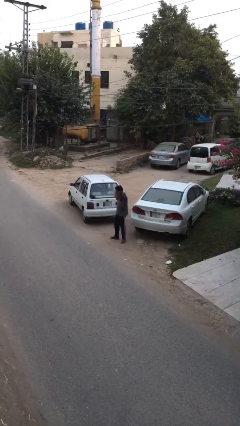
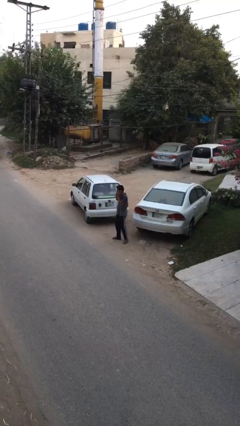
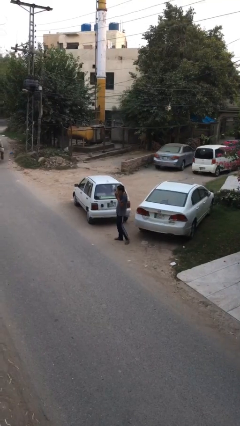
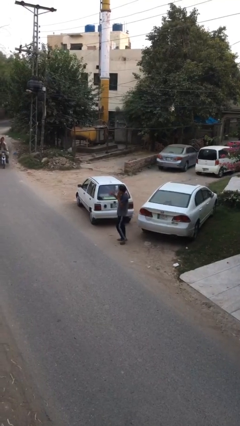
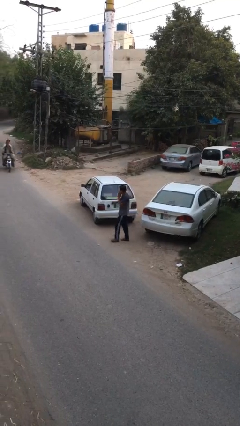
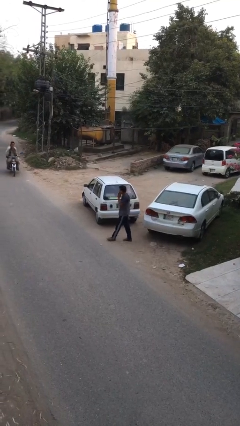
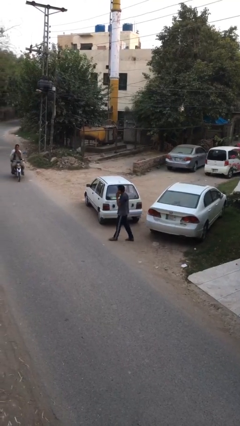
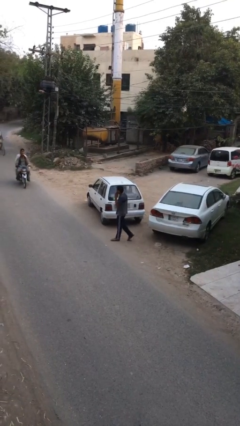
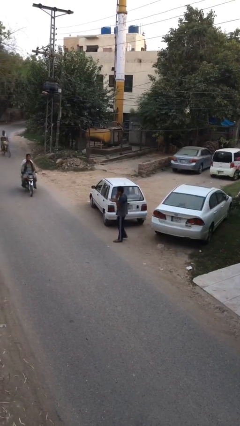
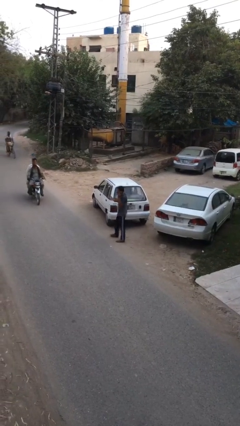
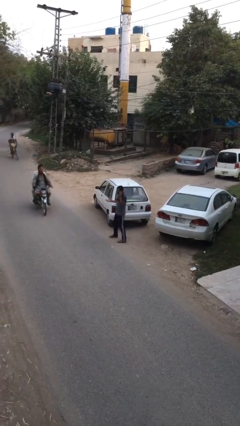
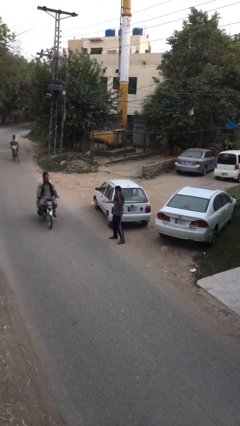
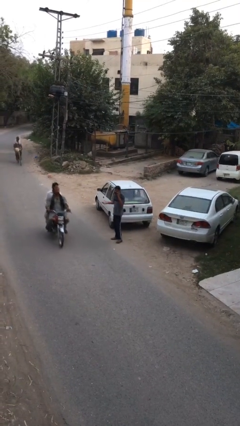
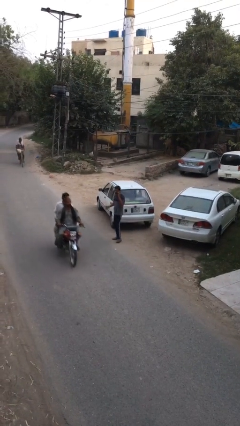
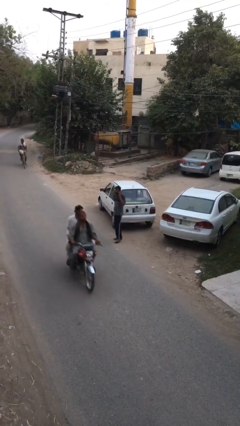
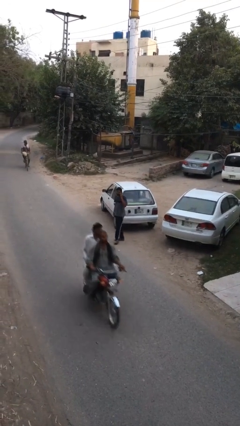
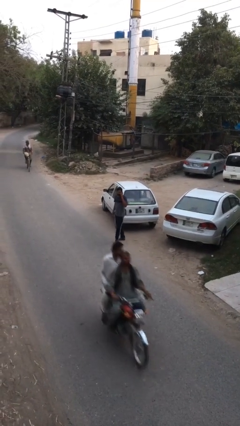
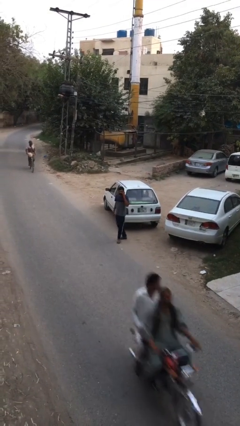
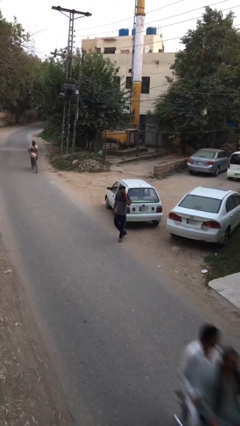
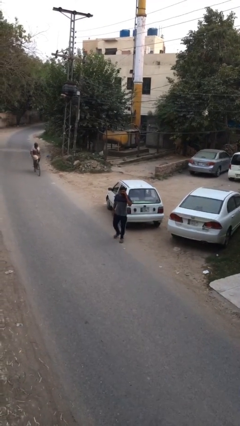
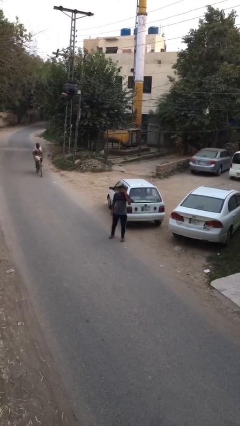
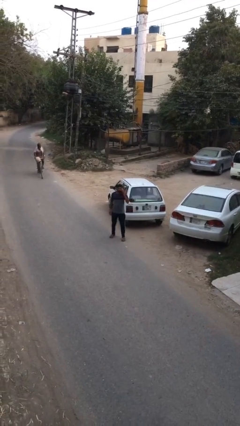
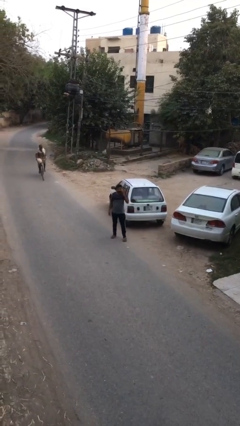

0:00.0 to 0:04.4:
person talks on phone

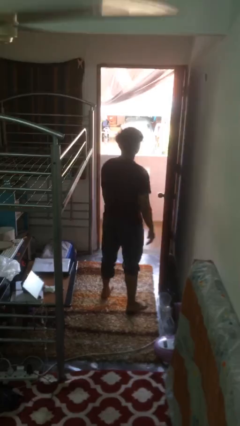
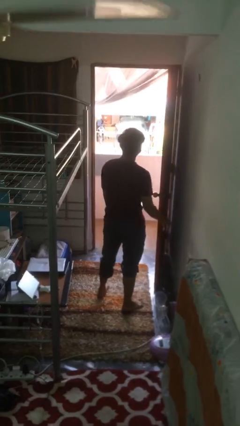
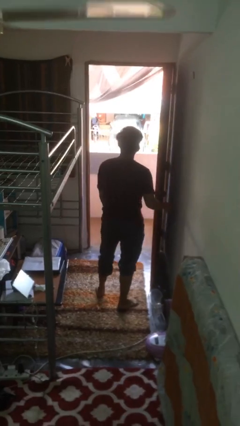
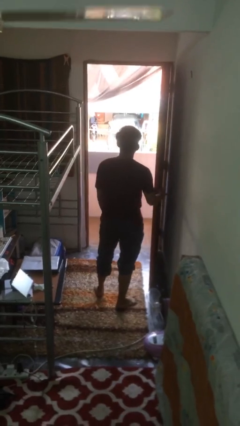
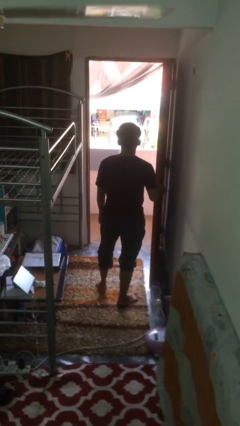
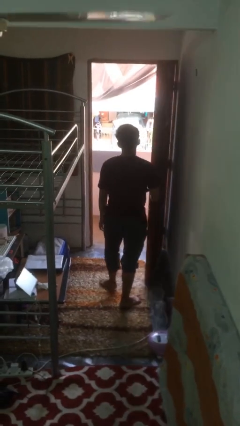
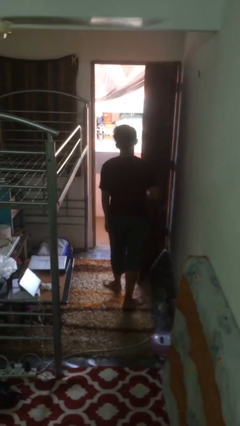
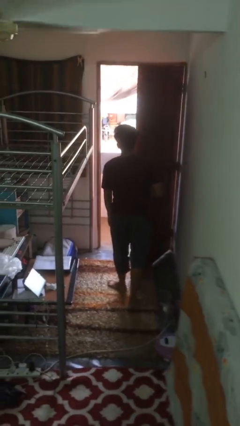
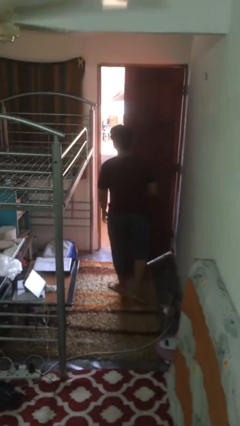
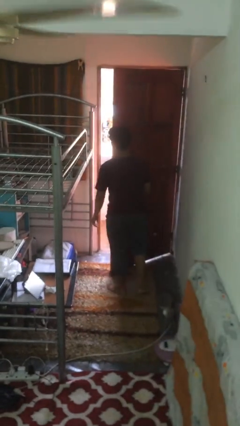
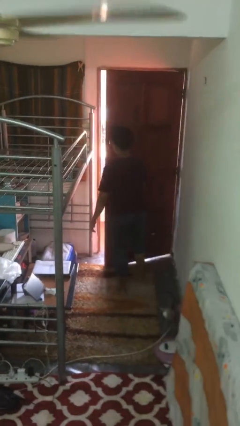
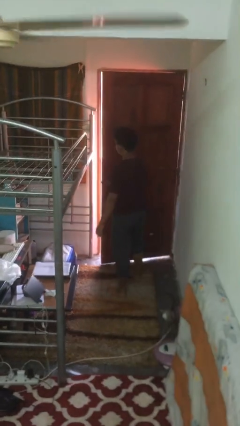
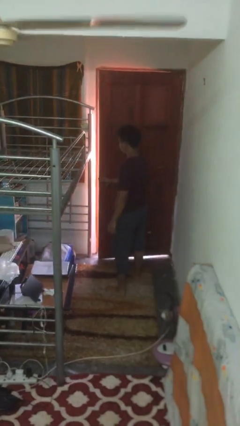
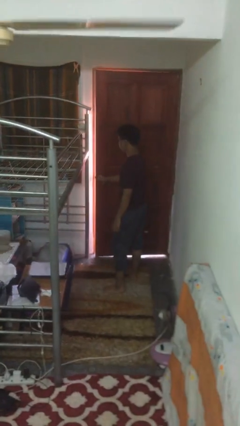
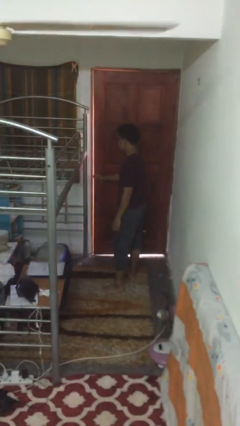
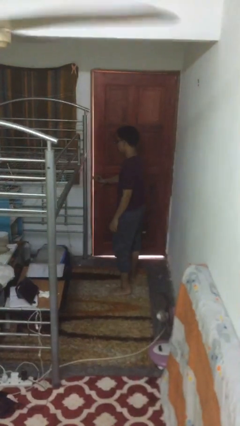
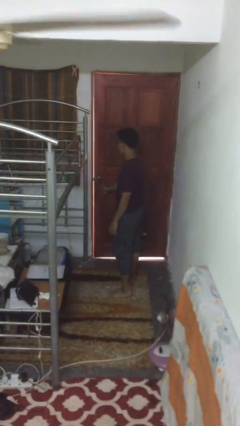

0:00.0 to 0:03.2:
person closes facility door

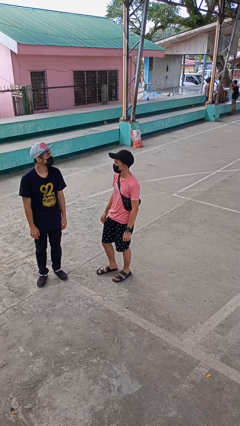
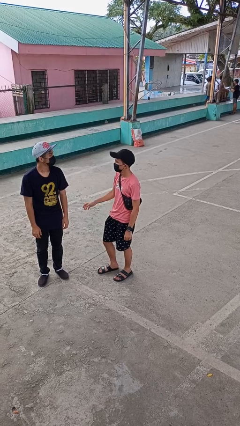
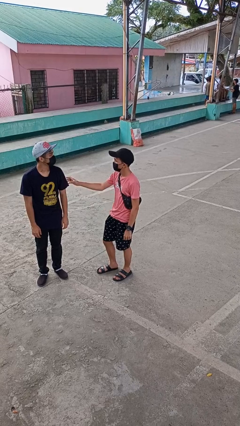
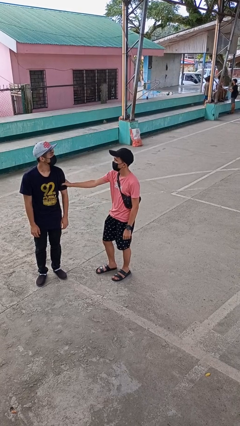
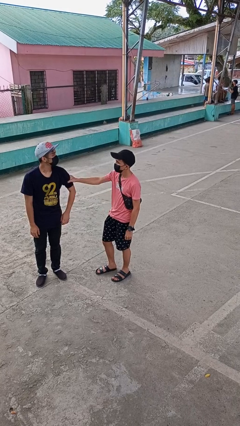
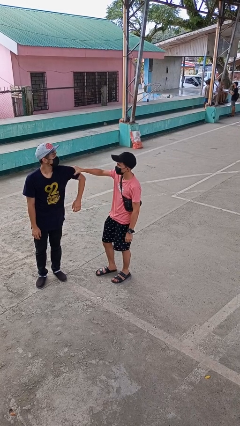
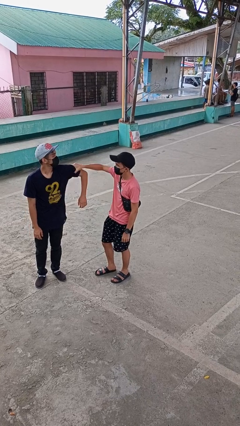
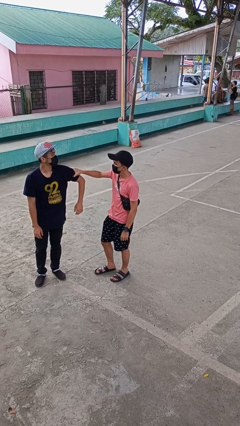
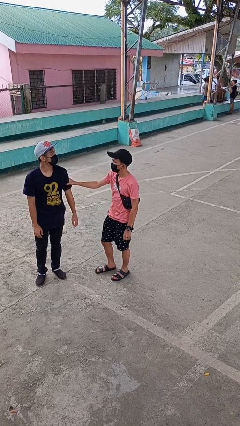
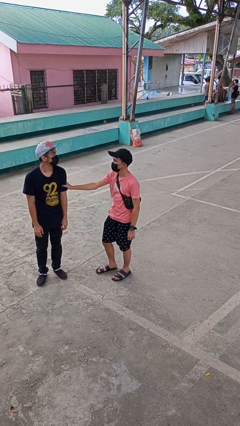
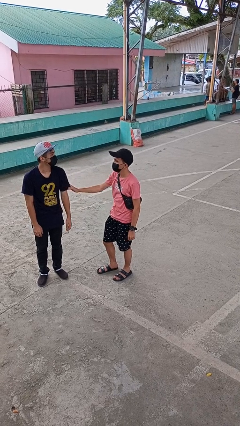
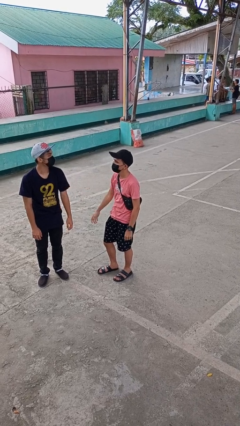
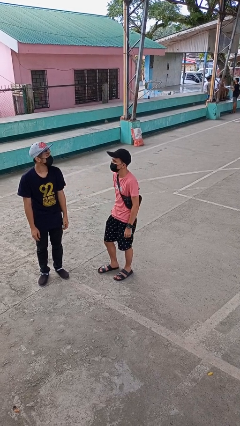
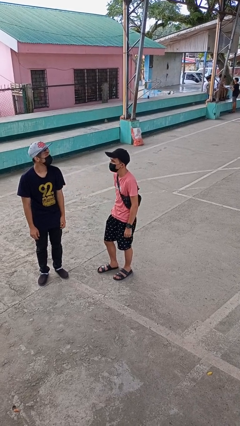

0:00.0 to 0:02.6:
person grabs person by bicep

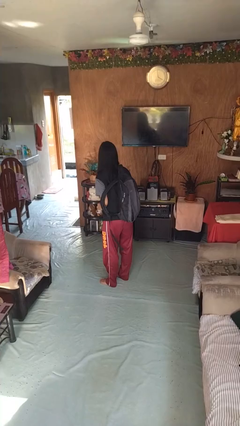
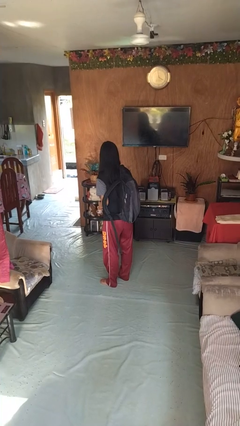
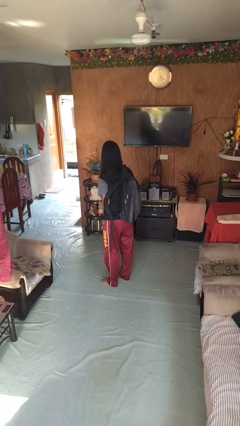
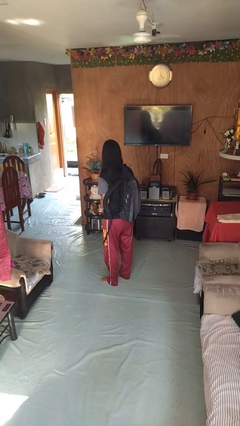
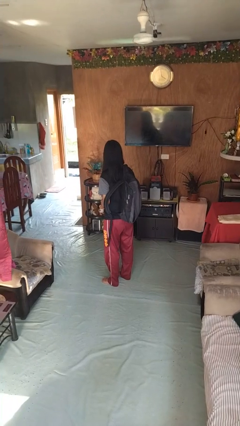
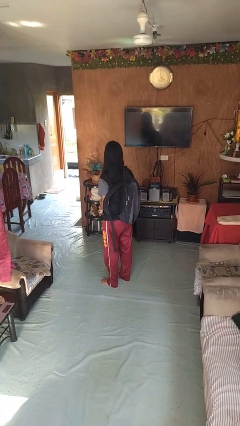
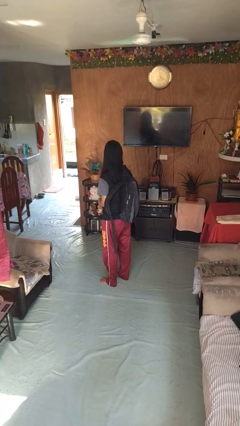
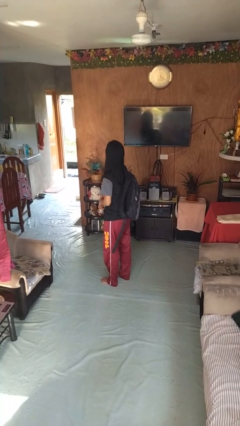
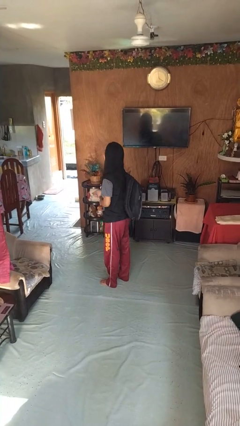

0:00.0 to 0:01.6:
person takes off backpack

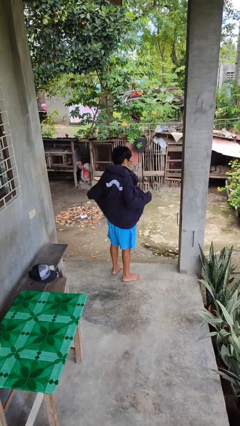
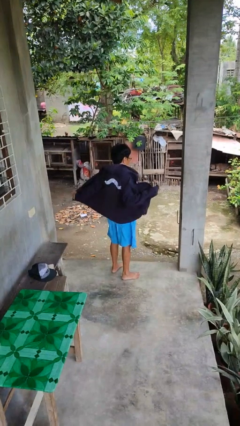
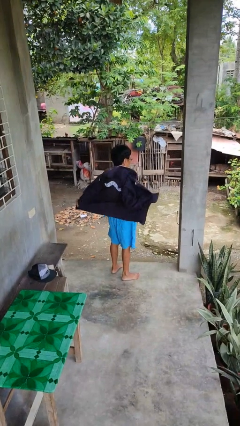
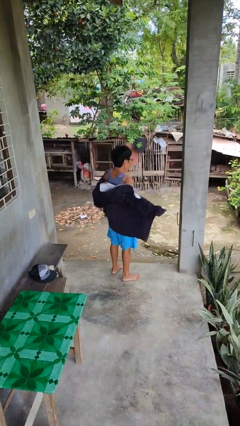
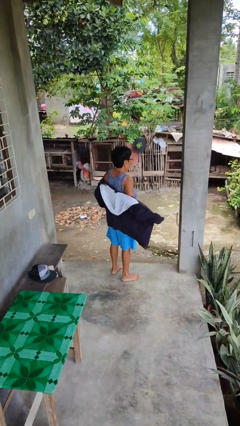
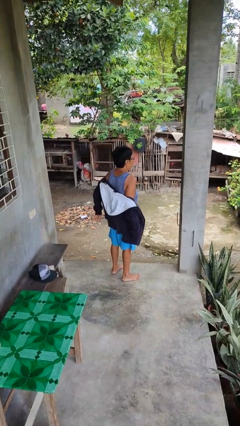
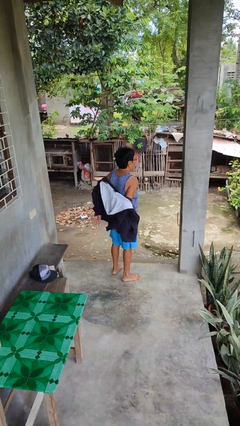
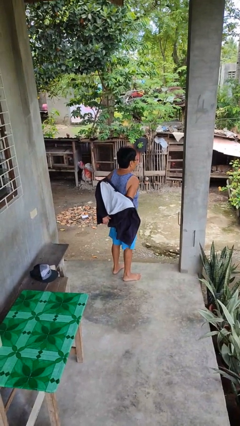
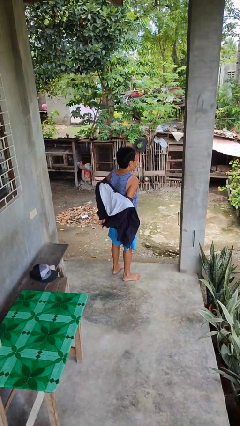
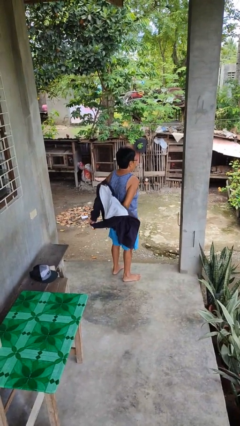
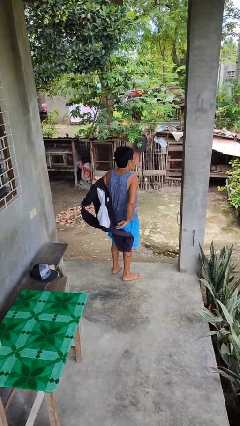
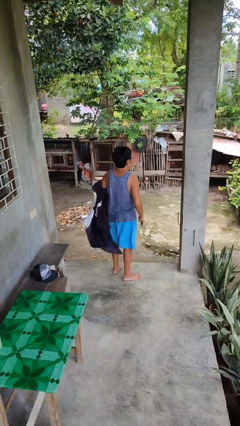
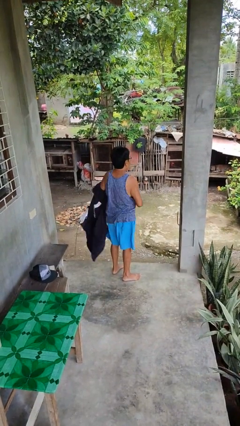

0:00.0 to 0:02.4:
person takes off jacket

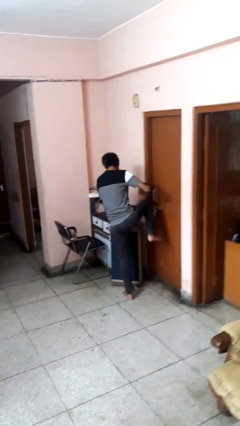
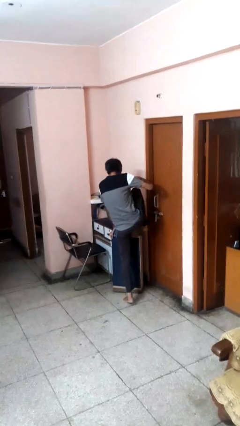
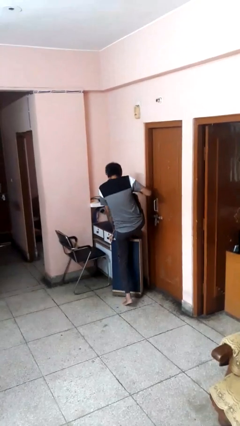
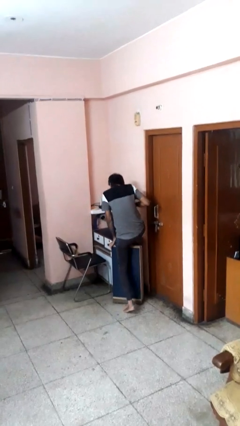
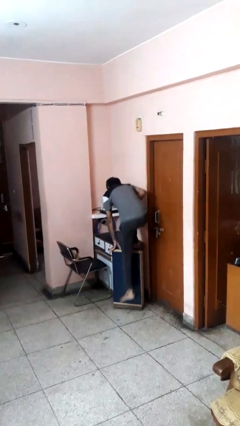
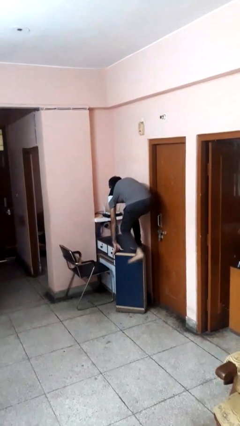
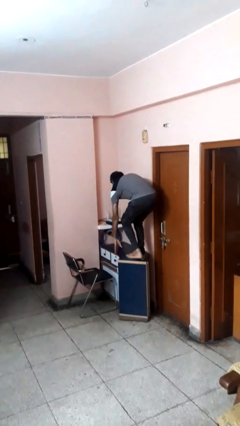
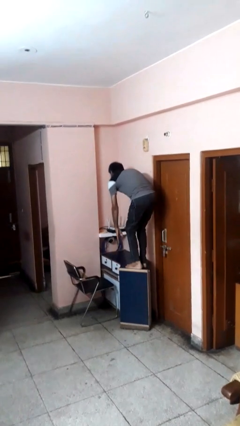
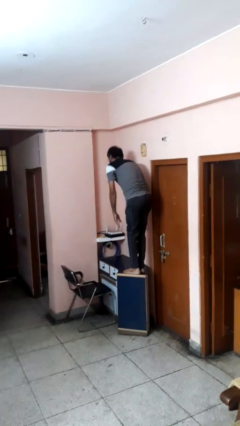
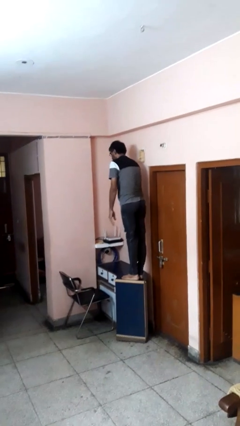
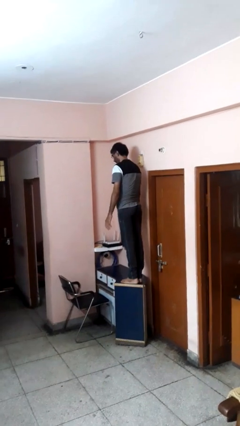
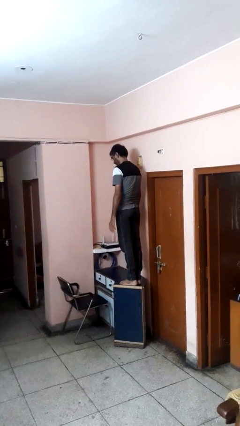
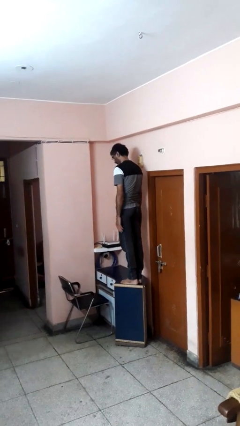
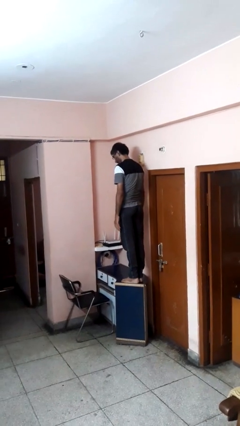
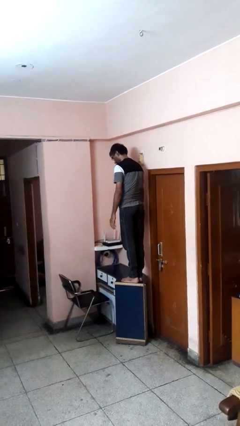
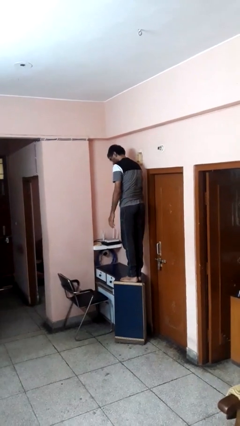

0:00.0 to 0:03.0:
person climbs on table
